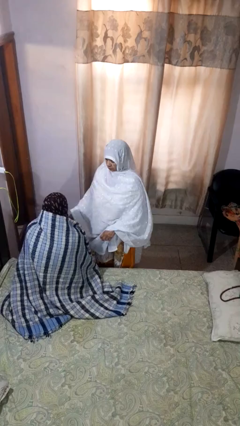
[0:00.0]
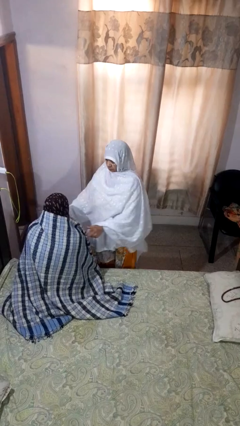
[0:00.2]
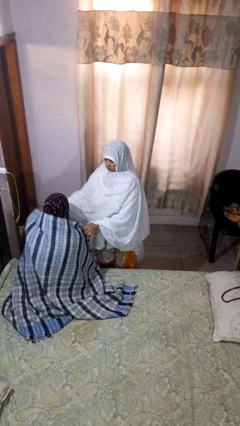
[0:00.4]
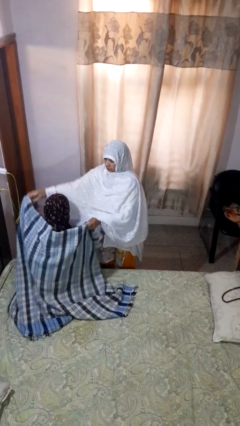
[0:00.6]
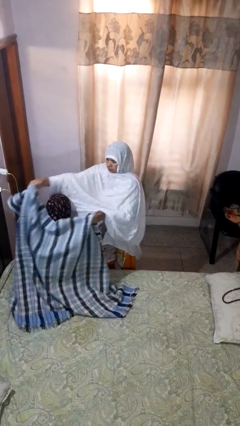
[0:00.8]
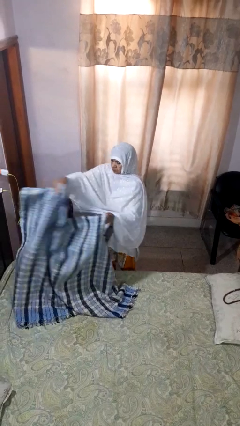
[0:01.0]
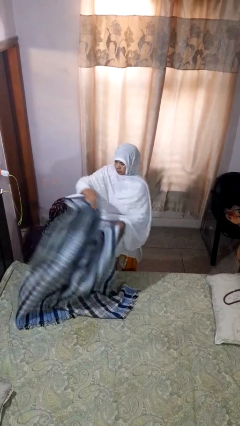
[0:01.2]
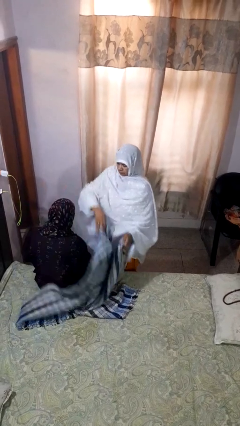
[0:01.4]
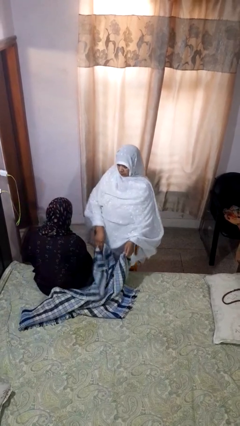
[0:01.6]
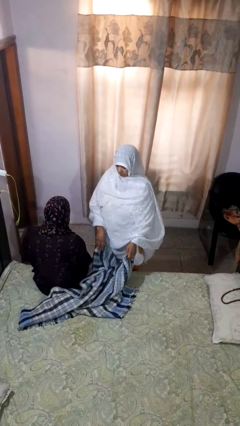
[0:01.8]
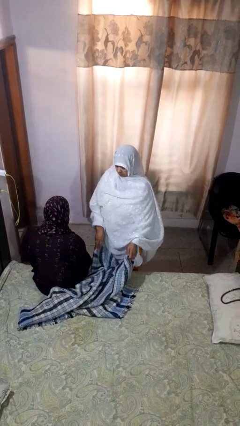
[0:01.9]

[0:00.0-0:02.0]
person uncovers friend with blanket

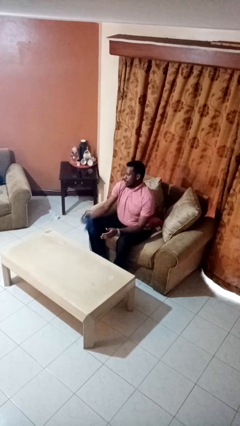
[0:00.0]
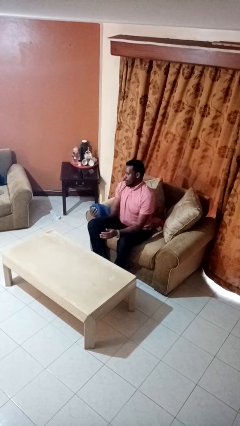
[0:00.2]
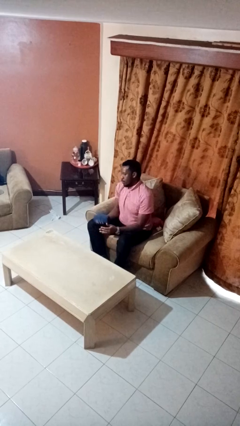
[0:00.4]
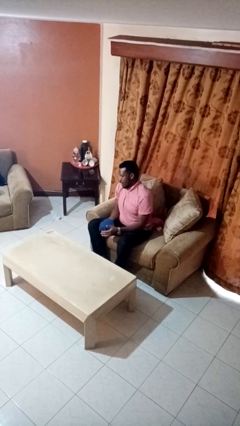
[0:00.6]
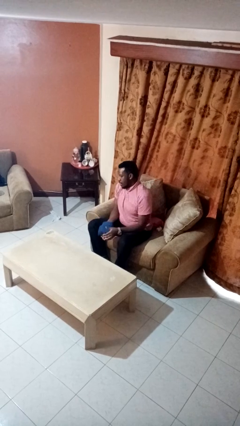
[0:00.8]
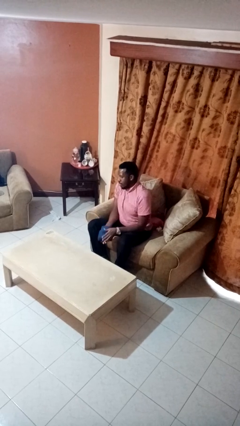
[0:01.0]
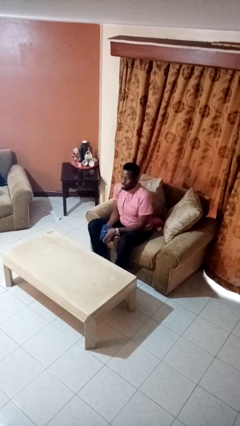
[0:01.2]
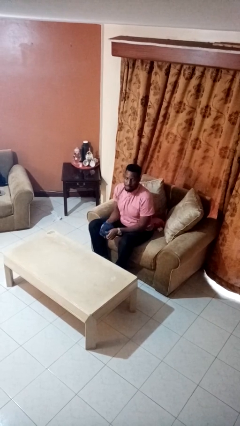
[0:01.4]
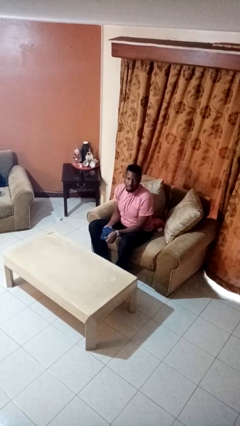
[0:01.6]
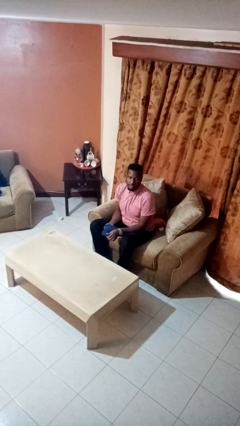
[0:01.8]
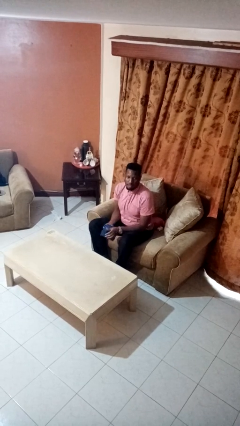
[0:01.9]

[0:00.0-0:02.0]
person cleans table with rag

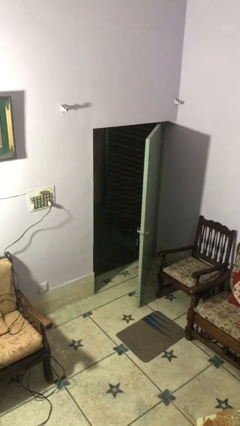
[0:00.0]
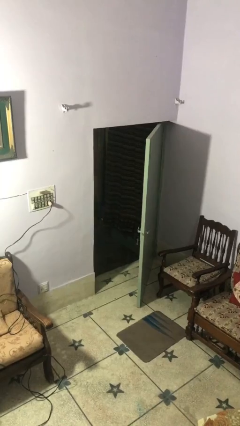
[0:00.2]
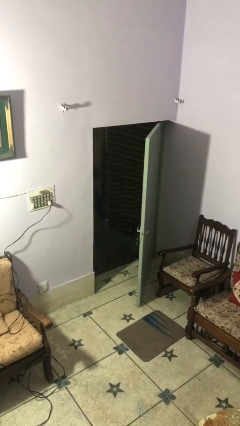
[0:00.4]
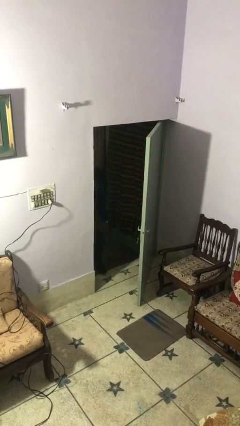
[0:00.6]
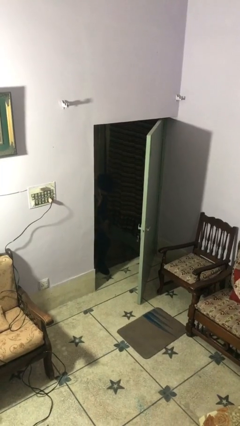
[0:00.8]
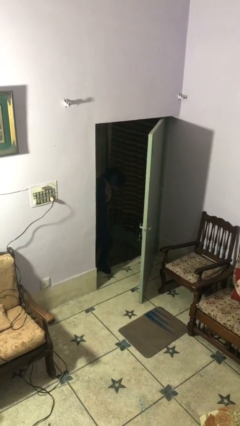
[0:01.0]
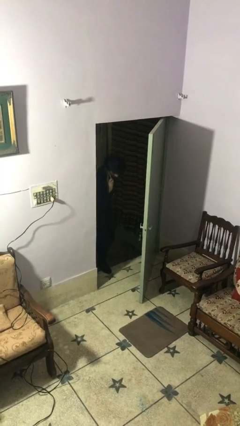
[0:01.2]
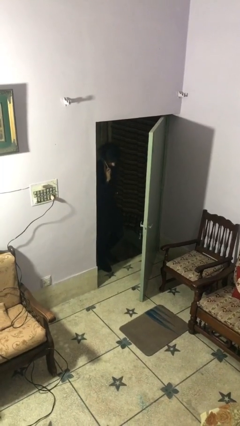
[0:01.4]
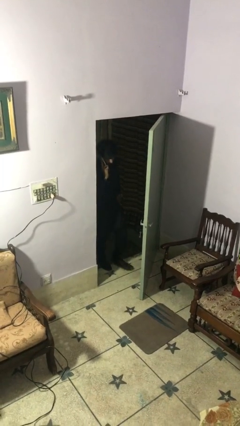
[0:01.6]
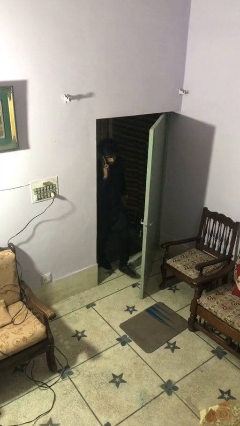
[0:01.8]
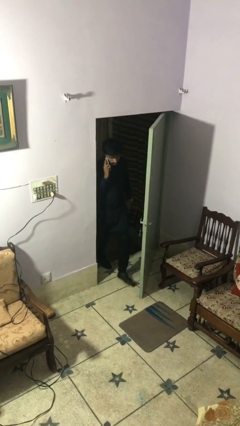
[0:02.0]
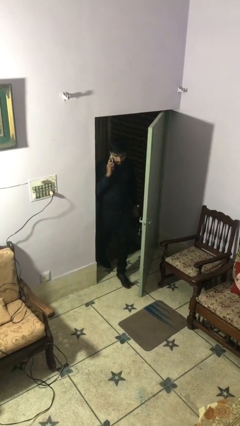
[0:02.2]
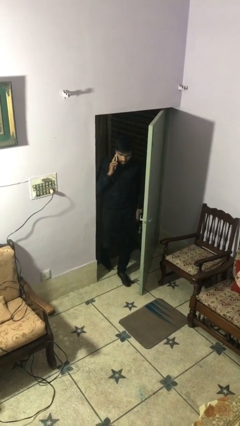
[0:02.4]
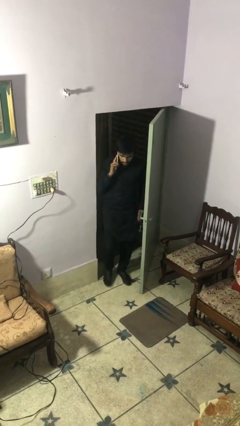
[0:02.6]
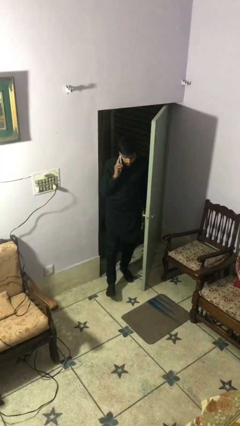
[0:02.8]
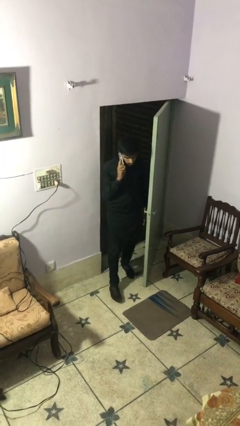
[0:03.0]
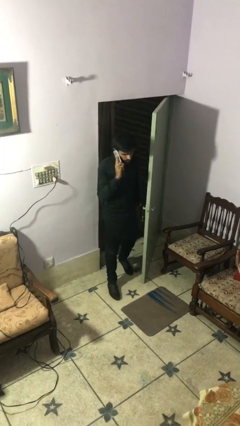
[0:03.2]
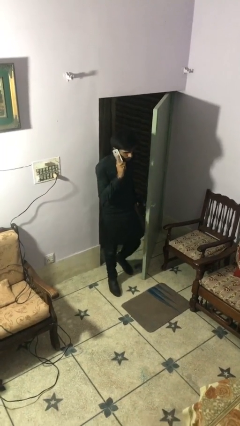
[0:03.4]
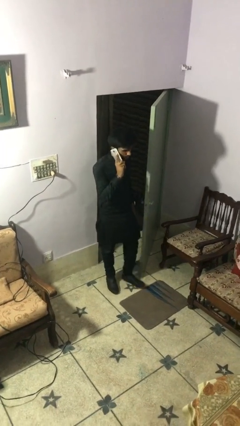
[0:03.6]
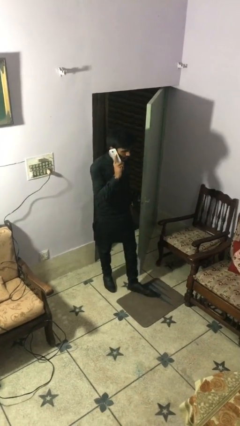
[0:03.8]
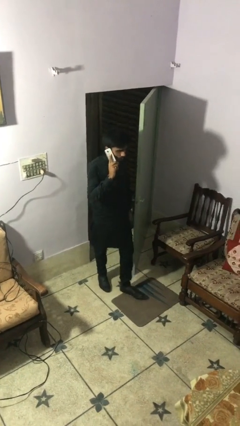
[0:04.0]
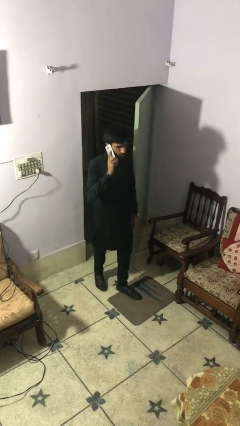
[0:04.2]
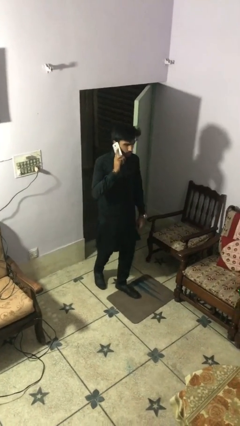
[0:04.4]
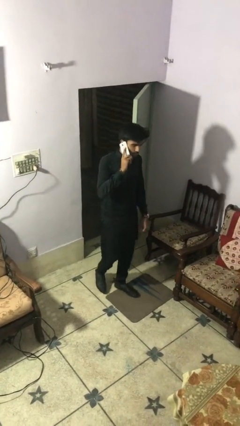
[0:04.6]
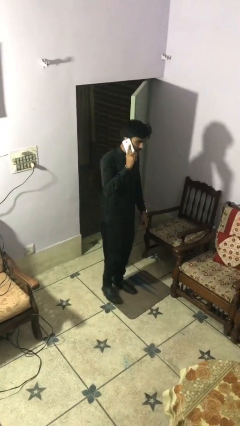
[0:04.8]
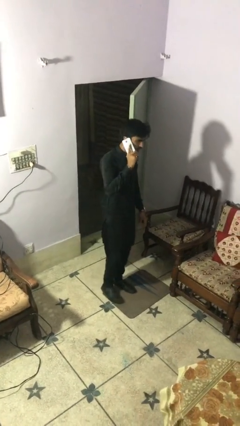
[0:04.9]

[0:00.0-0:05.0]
person enters scene through structure

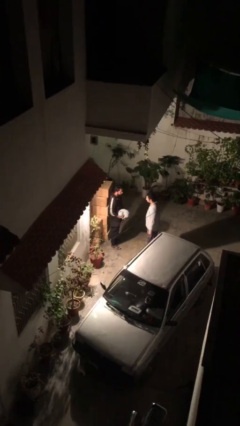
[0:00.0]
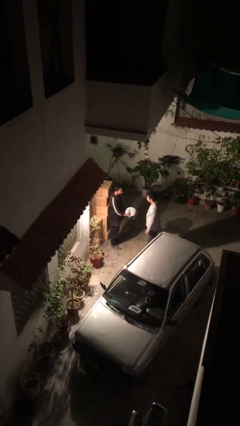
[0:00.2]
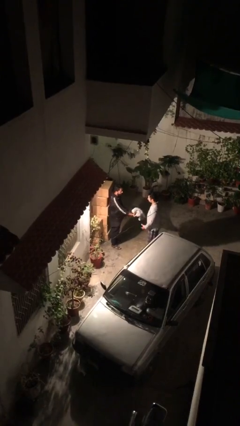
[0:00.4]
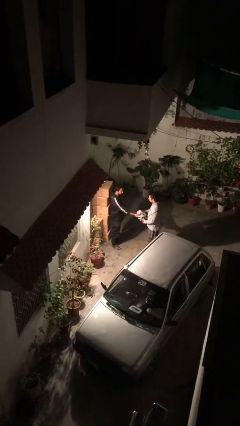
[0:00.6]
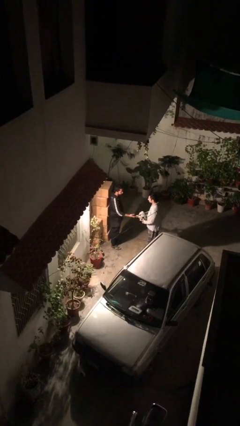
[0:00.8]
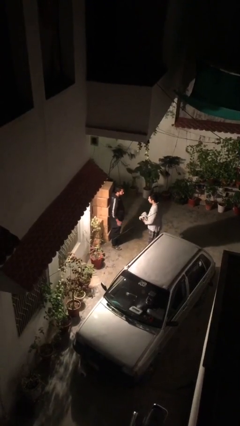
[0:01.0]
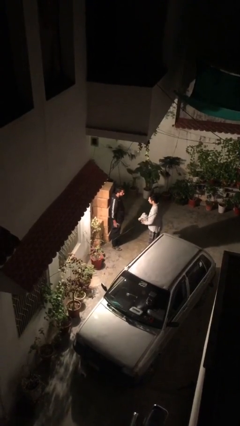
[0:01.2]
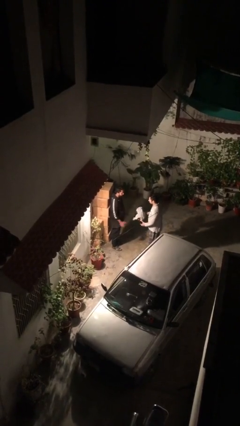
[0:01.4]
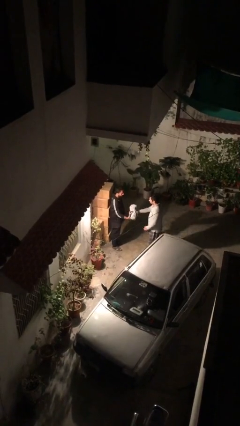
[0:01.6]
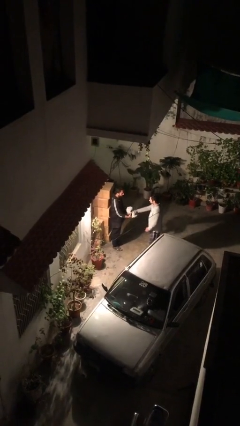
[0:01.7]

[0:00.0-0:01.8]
person transfers object to person

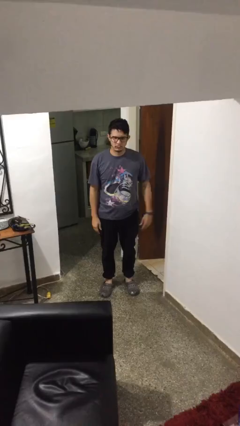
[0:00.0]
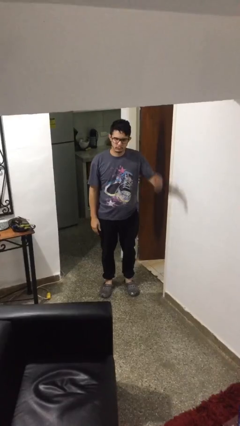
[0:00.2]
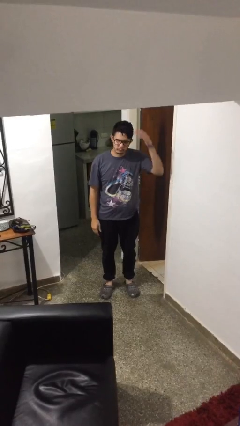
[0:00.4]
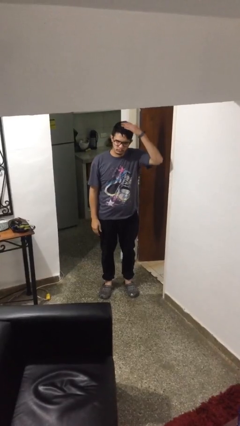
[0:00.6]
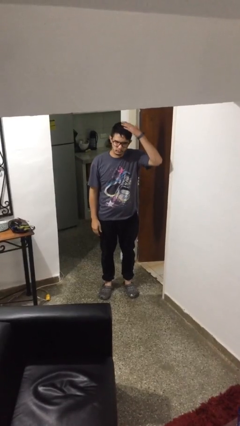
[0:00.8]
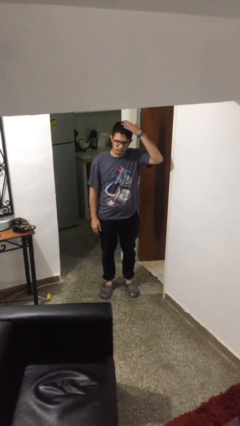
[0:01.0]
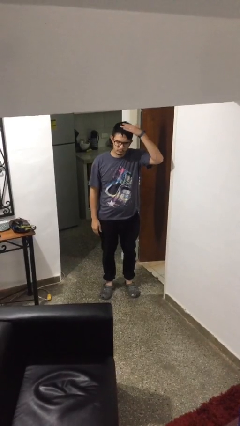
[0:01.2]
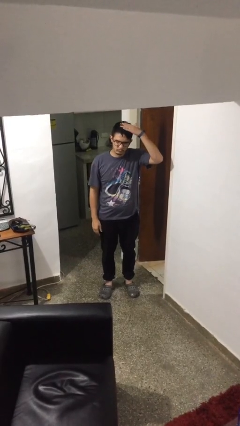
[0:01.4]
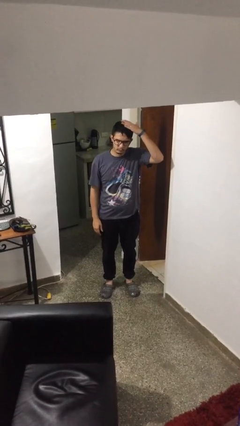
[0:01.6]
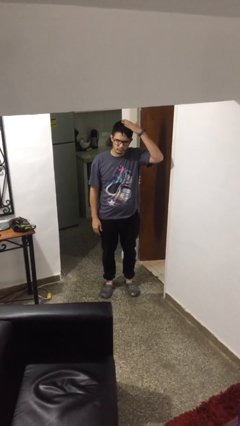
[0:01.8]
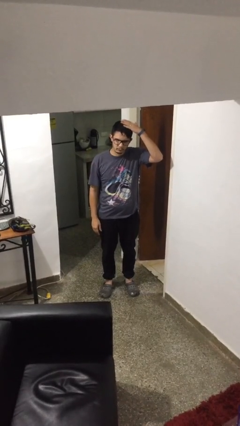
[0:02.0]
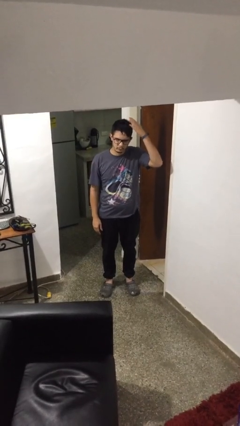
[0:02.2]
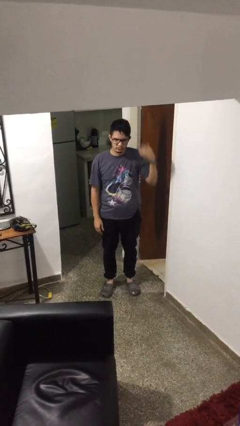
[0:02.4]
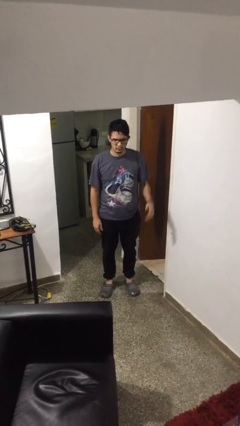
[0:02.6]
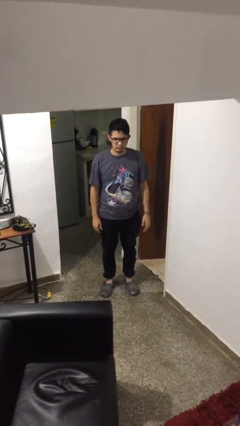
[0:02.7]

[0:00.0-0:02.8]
person pats head

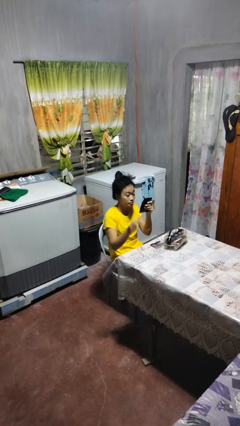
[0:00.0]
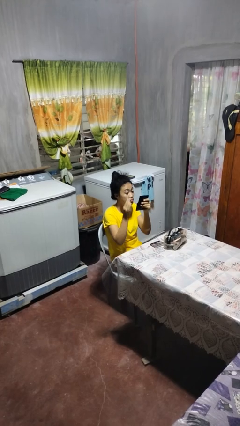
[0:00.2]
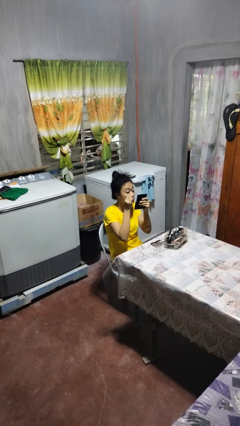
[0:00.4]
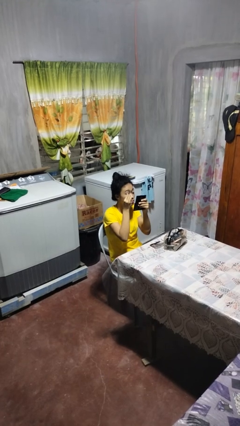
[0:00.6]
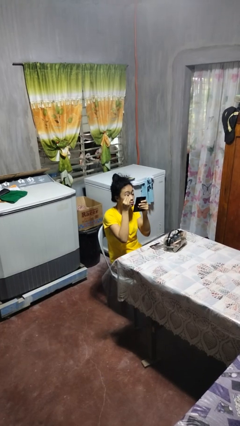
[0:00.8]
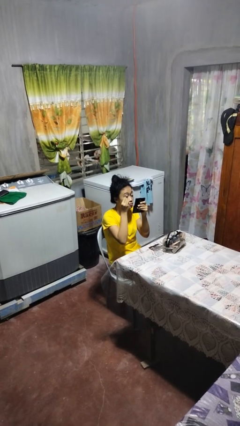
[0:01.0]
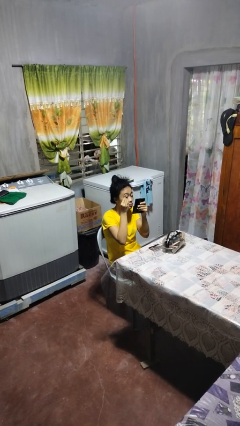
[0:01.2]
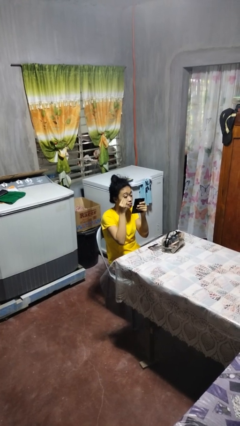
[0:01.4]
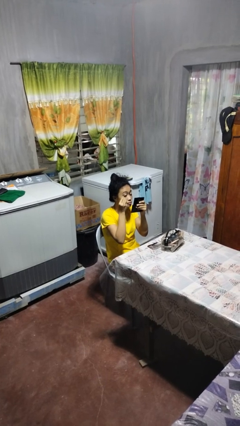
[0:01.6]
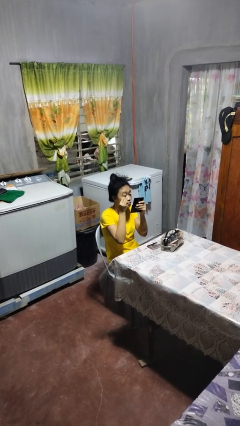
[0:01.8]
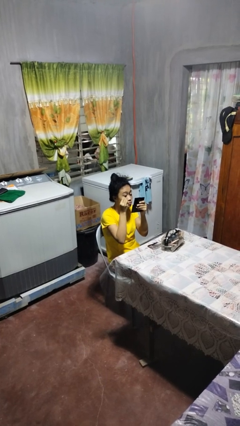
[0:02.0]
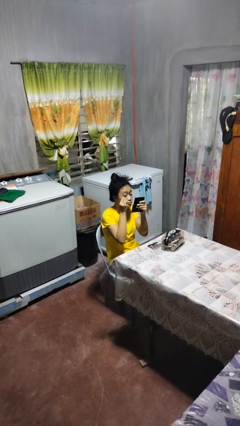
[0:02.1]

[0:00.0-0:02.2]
person applies eye makeup

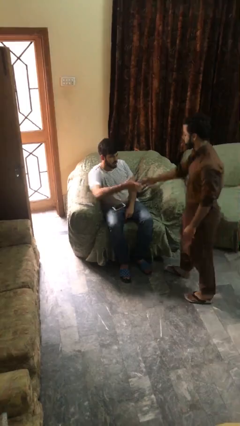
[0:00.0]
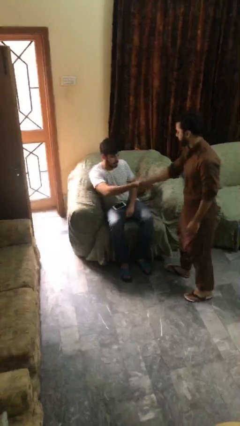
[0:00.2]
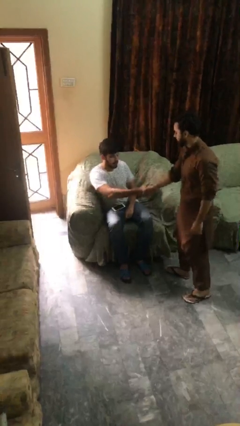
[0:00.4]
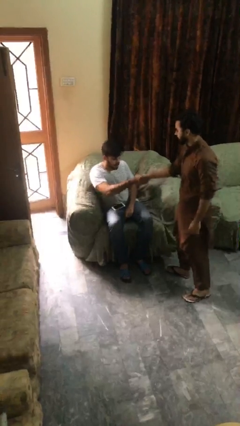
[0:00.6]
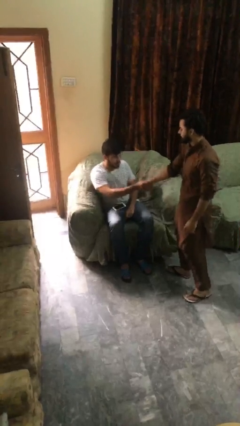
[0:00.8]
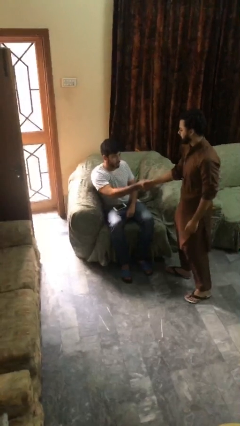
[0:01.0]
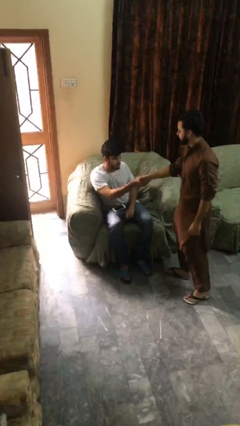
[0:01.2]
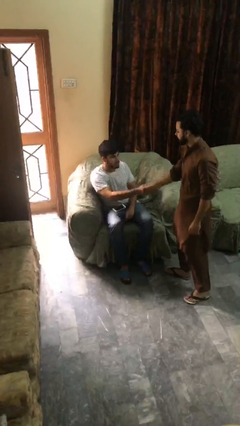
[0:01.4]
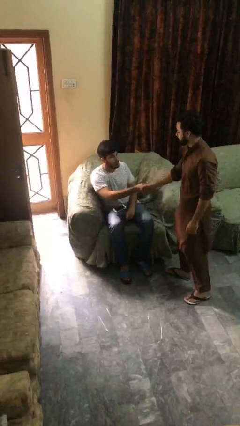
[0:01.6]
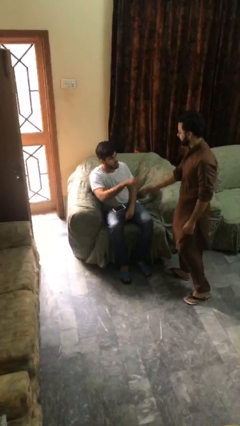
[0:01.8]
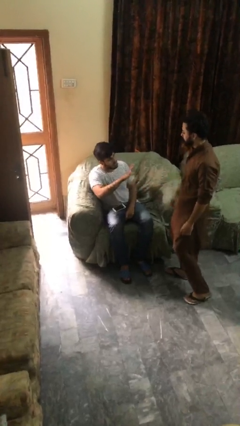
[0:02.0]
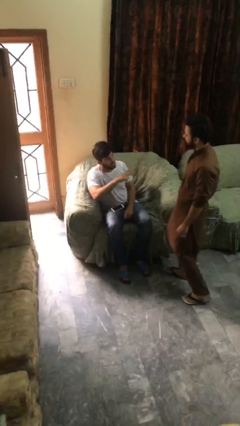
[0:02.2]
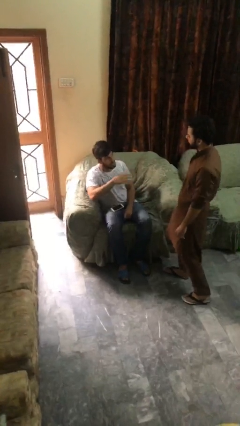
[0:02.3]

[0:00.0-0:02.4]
person shakes hand
